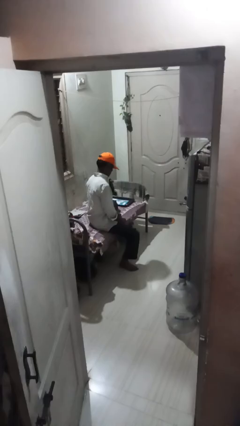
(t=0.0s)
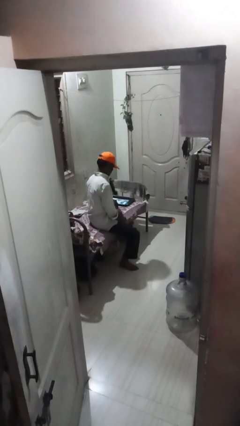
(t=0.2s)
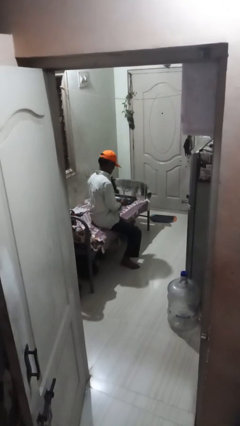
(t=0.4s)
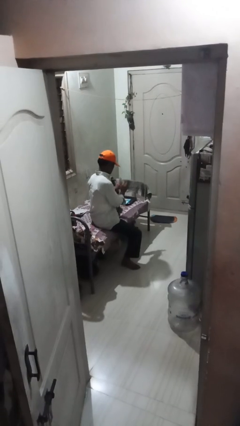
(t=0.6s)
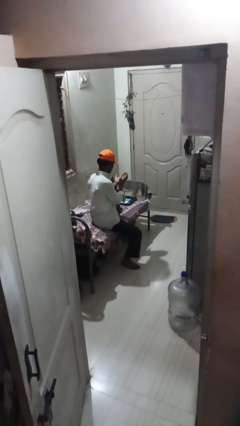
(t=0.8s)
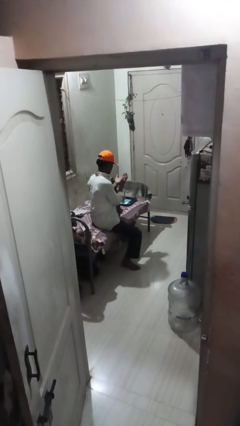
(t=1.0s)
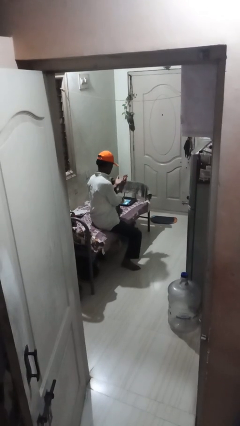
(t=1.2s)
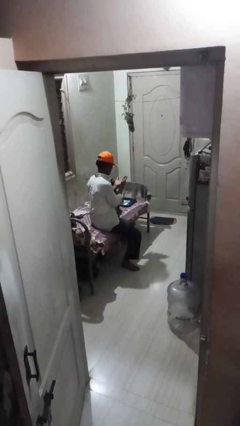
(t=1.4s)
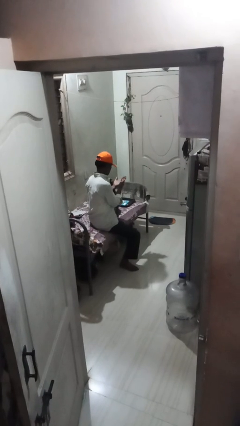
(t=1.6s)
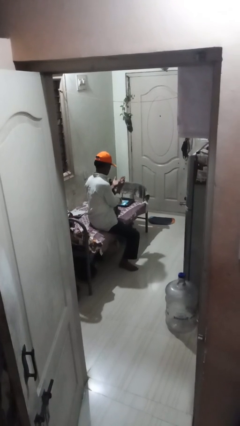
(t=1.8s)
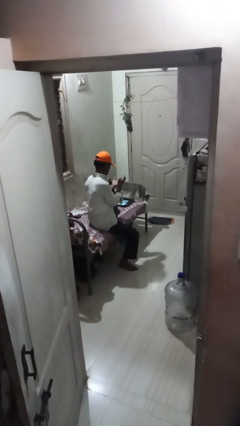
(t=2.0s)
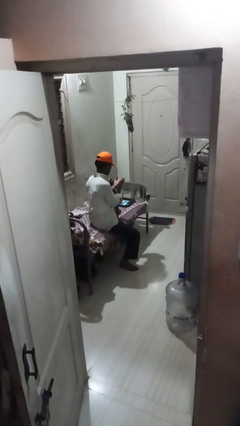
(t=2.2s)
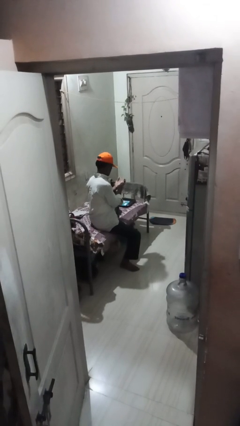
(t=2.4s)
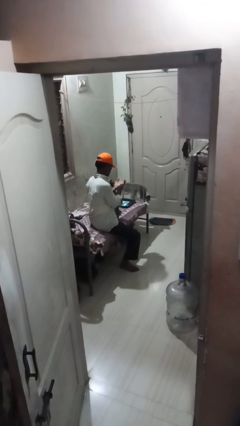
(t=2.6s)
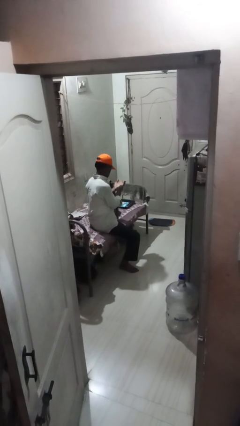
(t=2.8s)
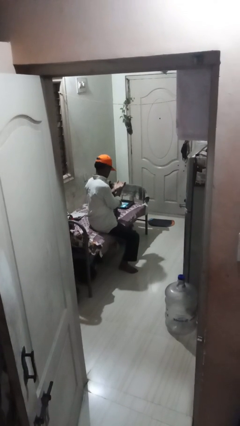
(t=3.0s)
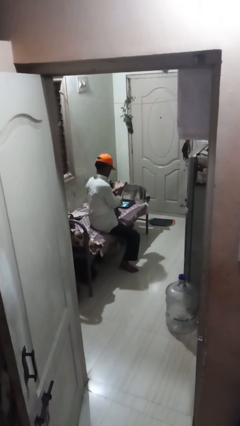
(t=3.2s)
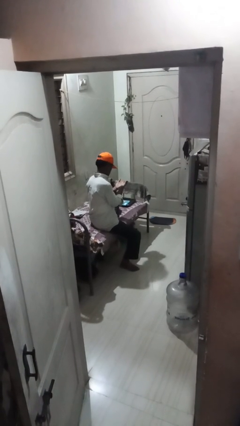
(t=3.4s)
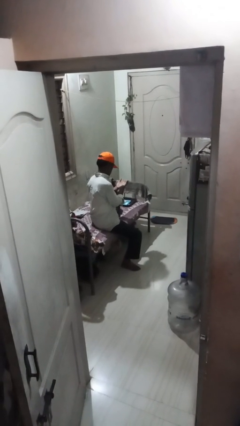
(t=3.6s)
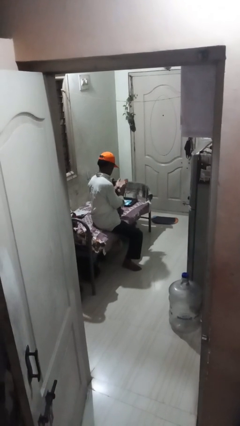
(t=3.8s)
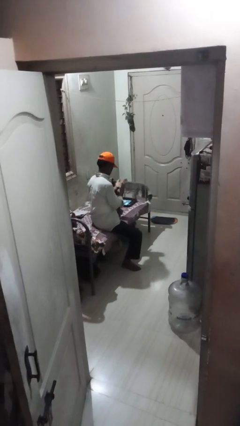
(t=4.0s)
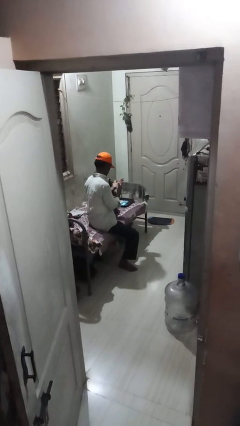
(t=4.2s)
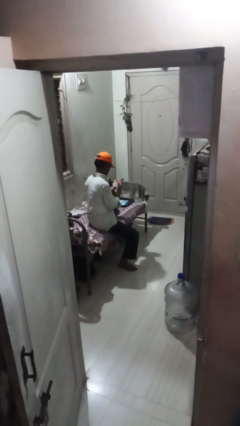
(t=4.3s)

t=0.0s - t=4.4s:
person looks at hands in lap

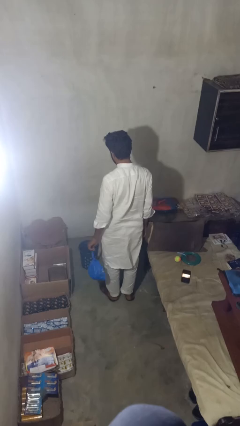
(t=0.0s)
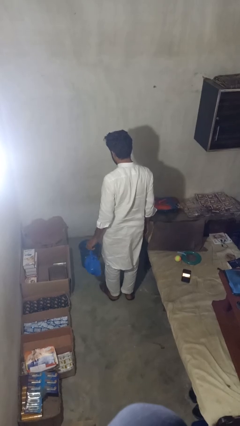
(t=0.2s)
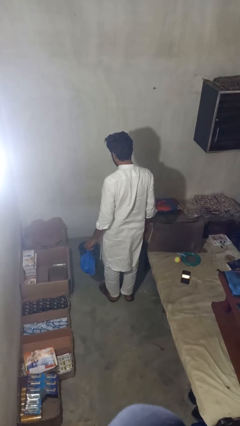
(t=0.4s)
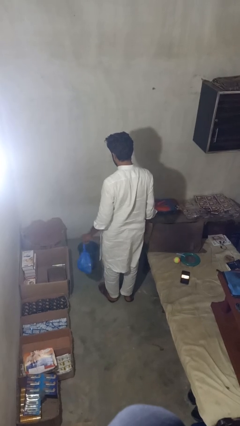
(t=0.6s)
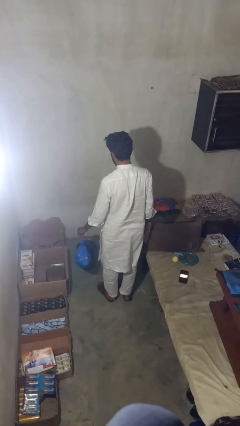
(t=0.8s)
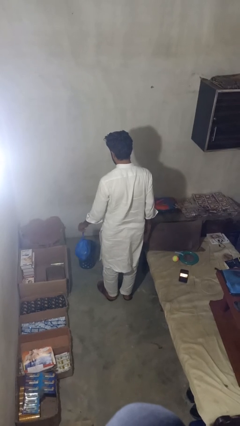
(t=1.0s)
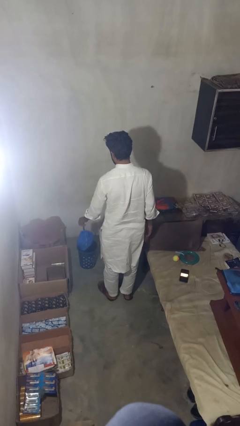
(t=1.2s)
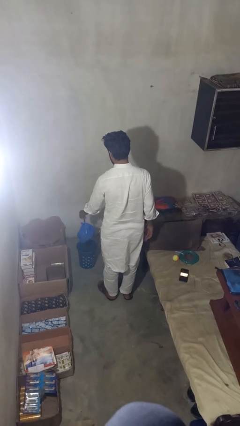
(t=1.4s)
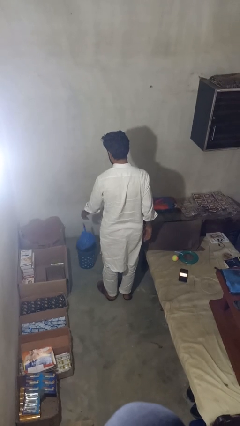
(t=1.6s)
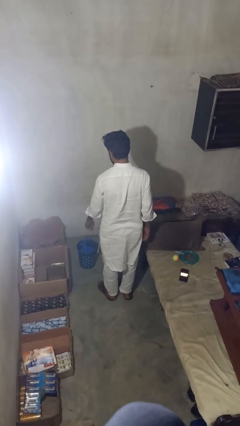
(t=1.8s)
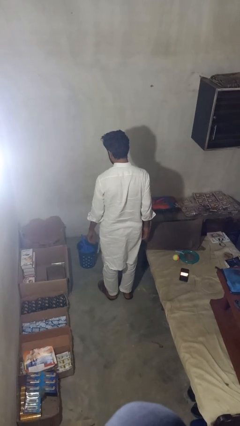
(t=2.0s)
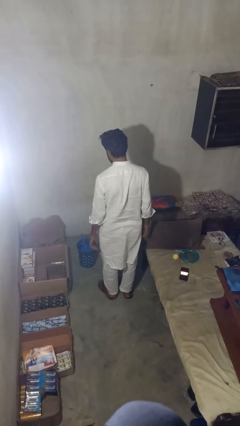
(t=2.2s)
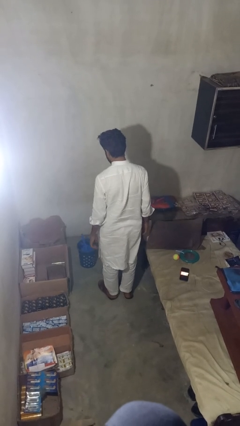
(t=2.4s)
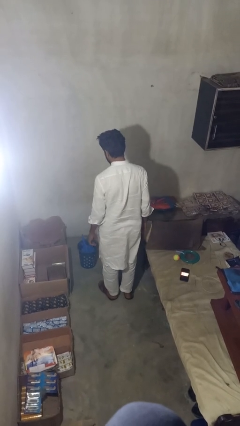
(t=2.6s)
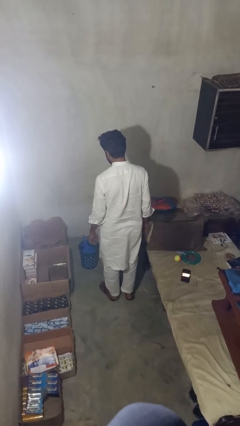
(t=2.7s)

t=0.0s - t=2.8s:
person puts object into basket

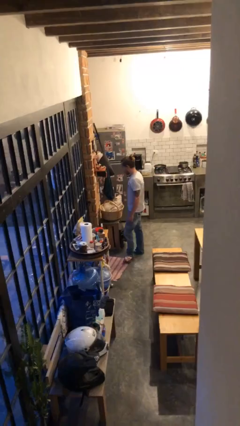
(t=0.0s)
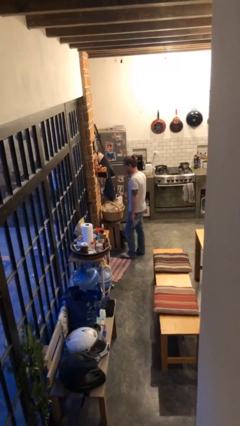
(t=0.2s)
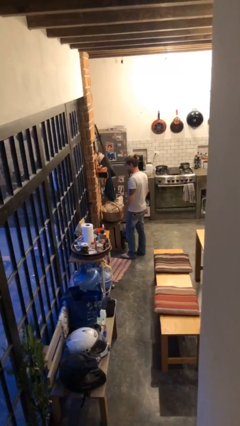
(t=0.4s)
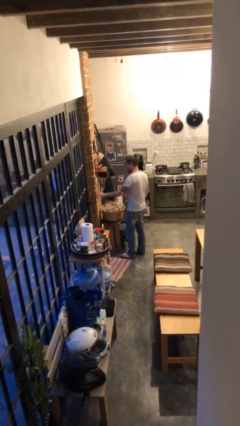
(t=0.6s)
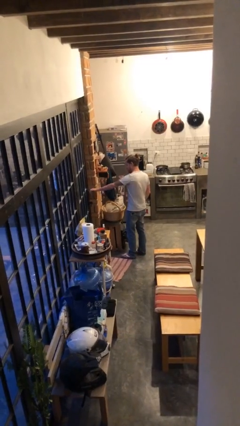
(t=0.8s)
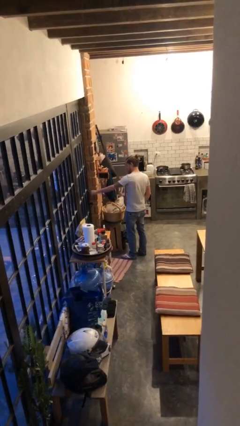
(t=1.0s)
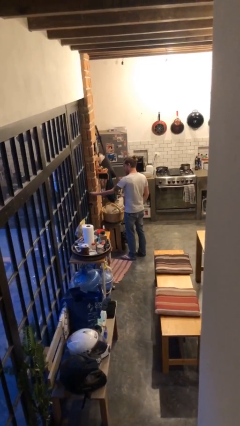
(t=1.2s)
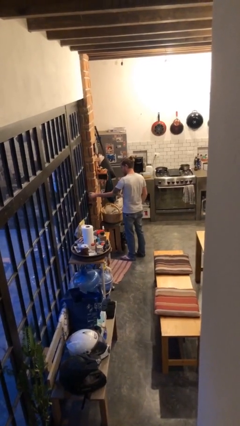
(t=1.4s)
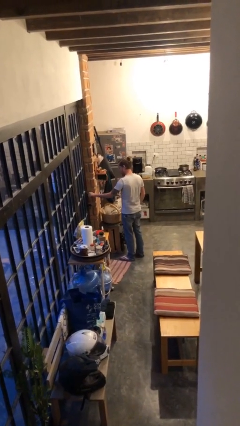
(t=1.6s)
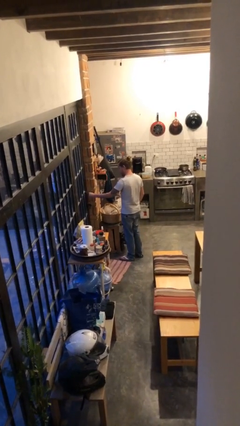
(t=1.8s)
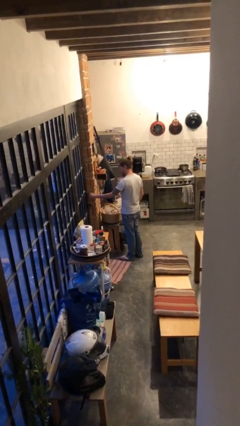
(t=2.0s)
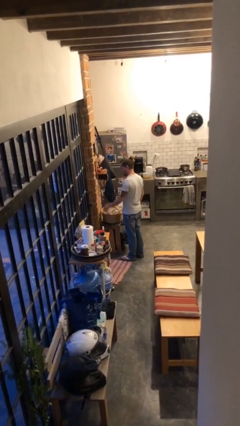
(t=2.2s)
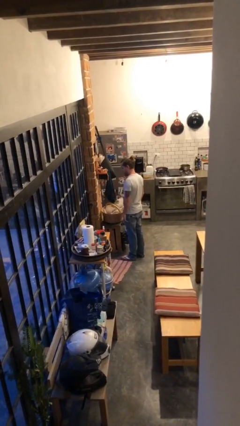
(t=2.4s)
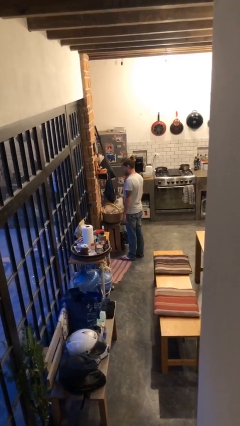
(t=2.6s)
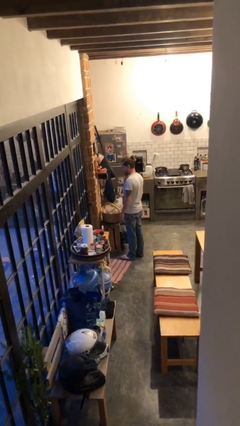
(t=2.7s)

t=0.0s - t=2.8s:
person unlocks door with keys

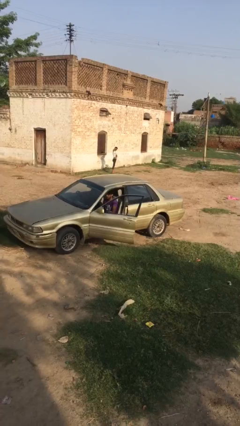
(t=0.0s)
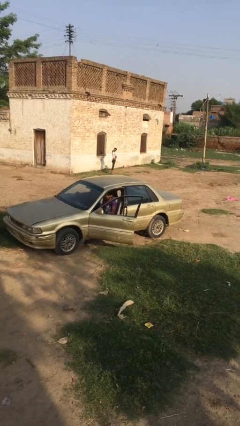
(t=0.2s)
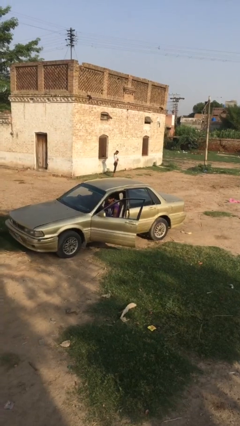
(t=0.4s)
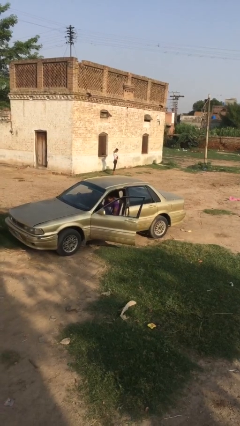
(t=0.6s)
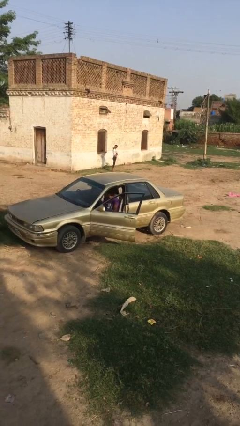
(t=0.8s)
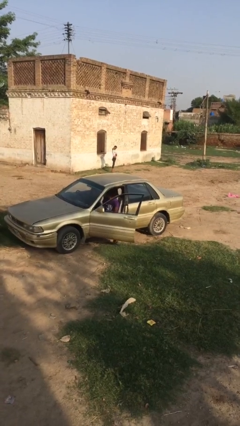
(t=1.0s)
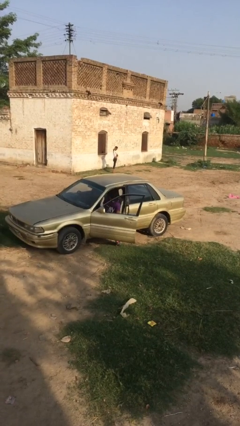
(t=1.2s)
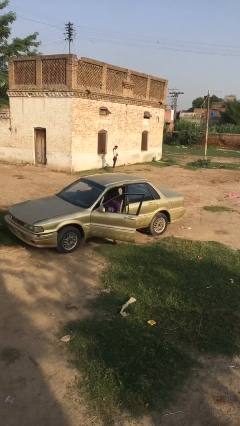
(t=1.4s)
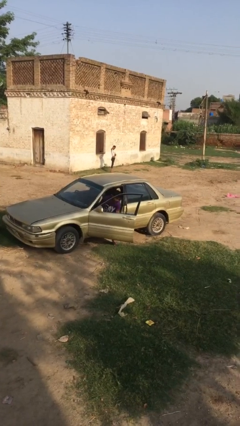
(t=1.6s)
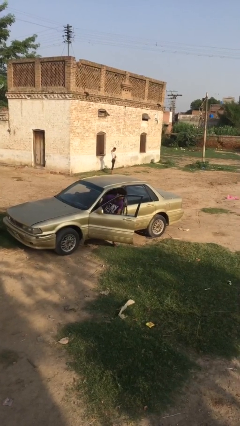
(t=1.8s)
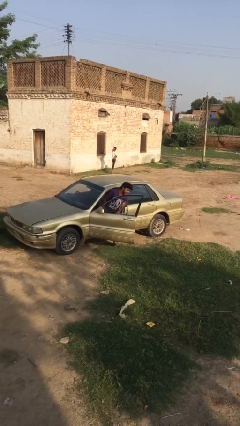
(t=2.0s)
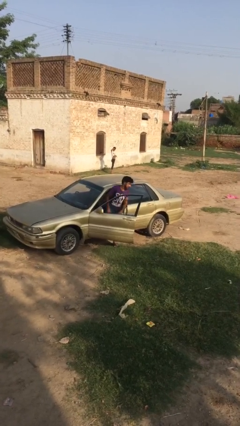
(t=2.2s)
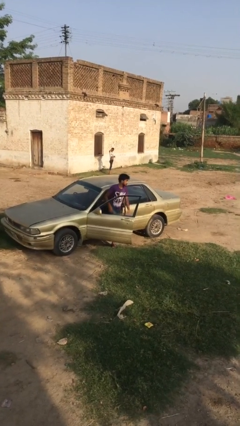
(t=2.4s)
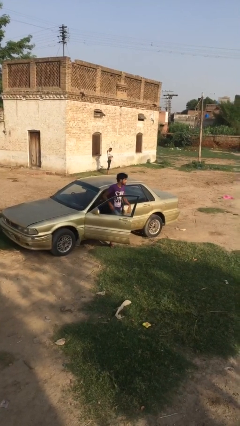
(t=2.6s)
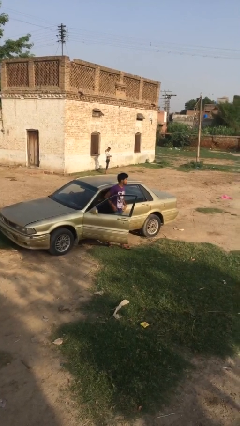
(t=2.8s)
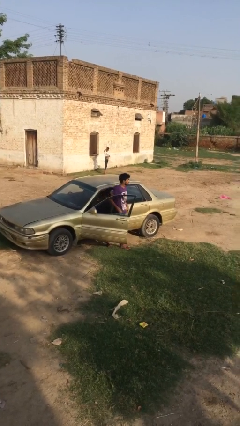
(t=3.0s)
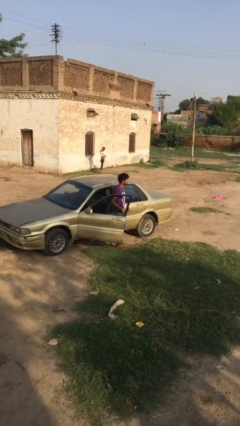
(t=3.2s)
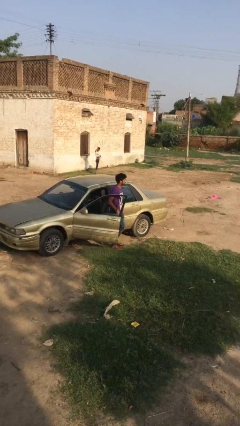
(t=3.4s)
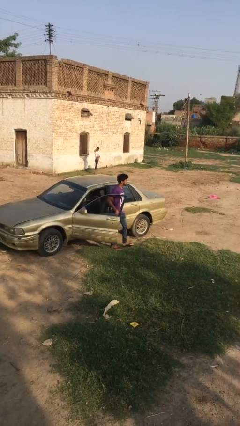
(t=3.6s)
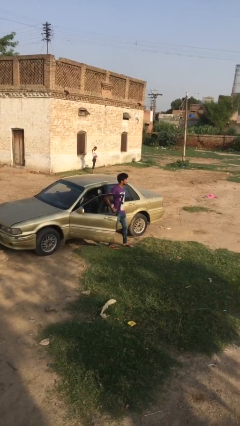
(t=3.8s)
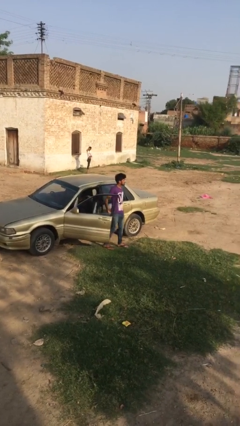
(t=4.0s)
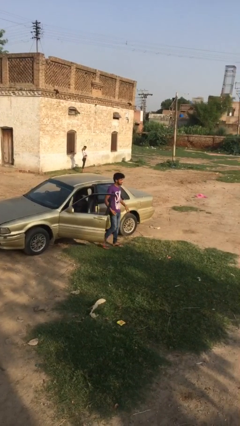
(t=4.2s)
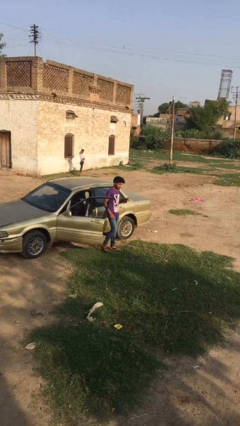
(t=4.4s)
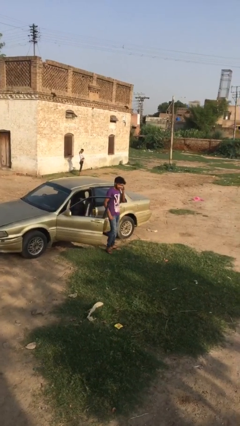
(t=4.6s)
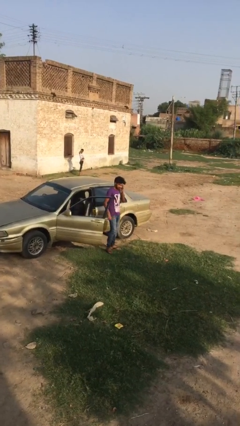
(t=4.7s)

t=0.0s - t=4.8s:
person exits car

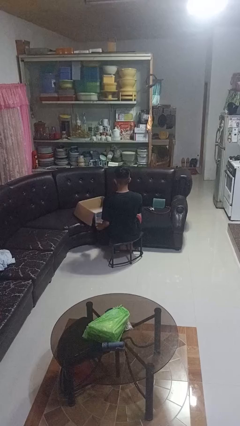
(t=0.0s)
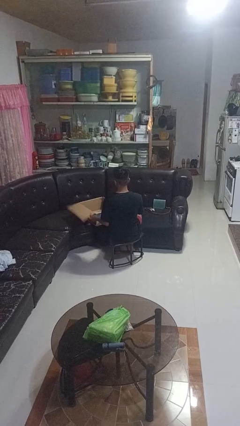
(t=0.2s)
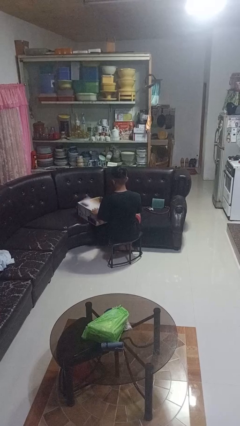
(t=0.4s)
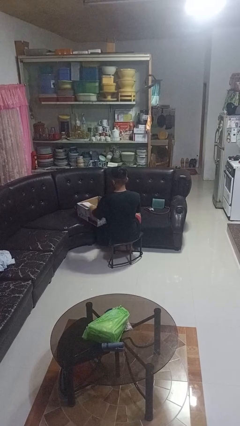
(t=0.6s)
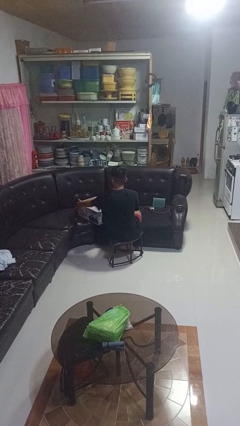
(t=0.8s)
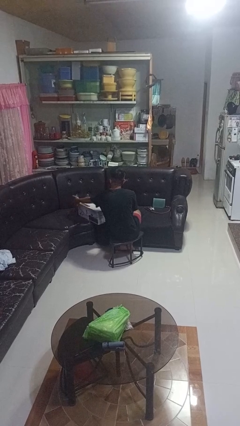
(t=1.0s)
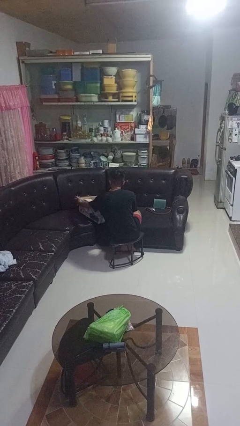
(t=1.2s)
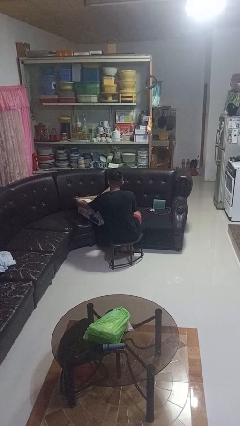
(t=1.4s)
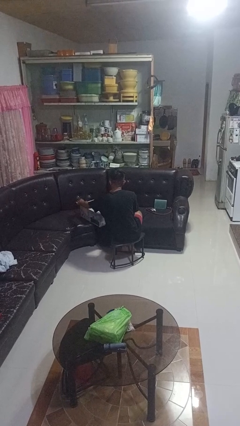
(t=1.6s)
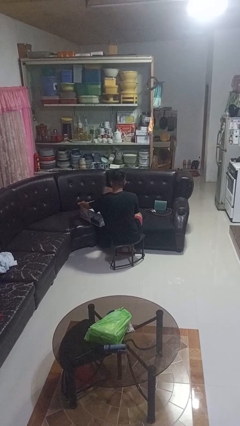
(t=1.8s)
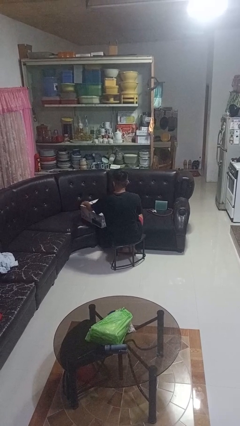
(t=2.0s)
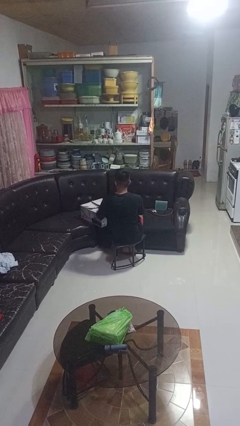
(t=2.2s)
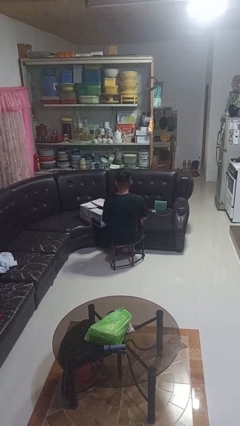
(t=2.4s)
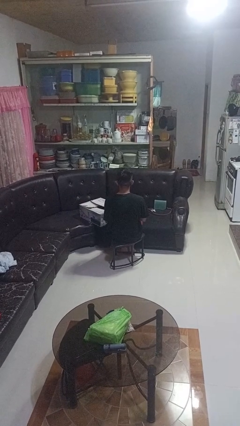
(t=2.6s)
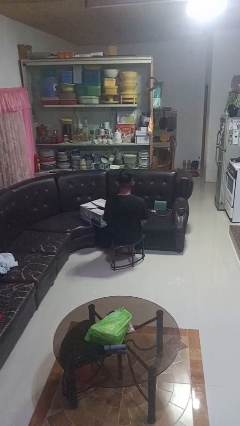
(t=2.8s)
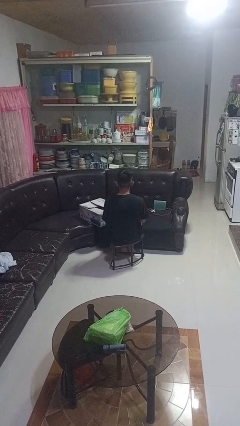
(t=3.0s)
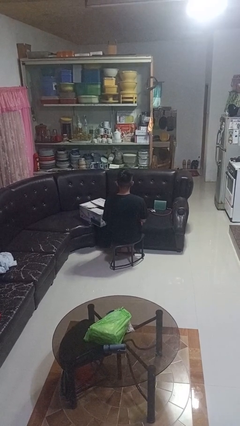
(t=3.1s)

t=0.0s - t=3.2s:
person closes box
